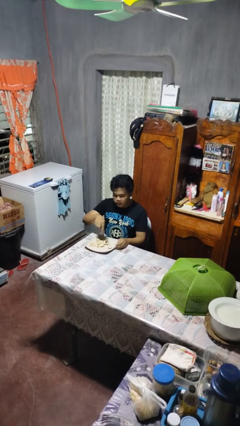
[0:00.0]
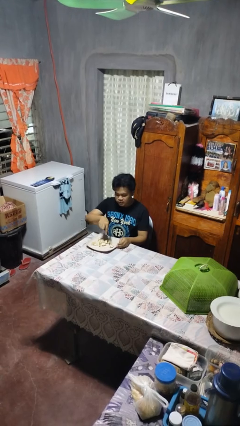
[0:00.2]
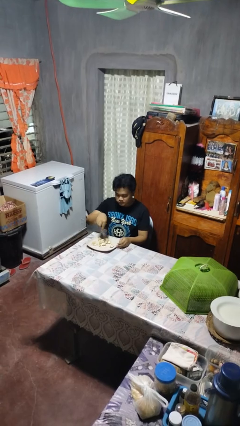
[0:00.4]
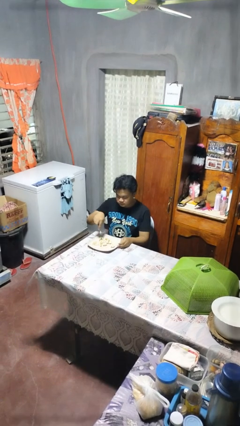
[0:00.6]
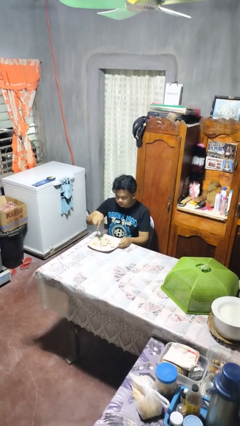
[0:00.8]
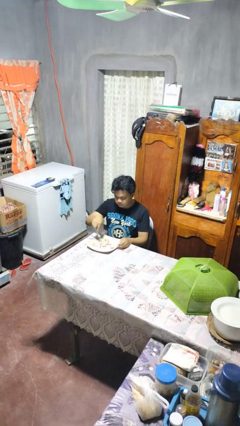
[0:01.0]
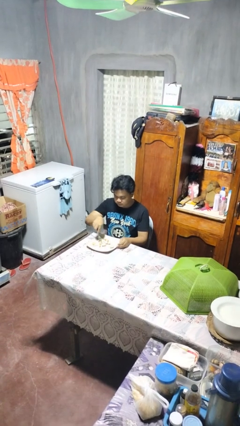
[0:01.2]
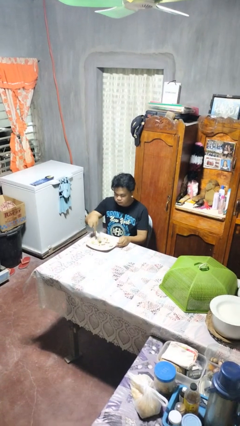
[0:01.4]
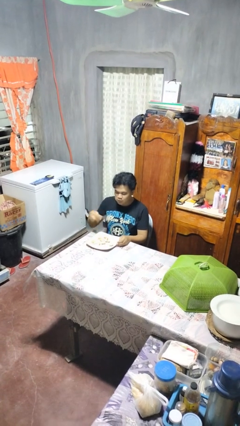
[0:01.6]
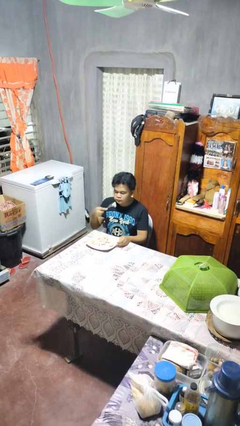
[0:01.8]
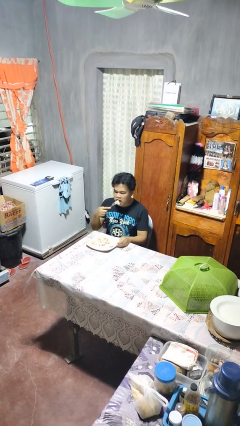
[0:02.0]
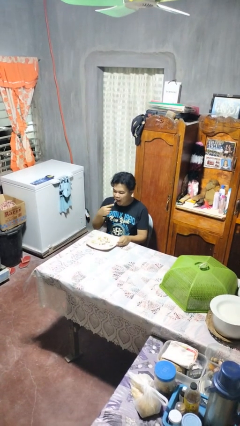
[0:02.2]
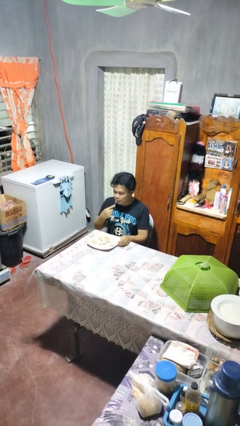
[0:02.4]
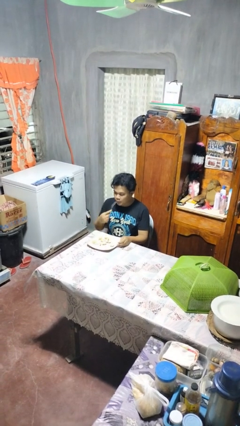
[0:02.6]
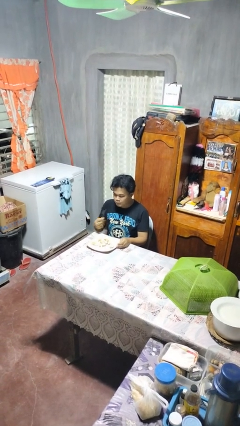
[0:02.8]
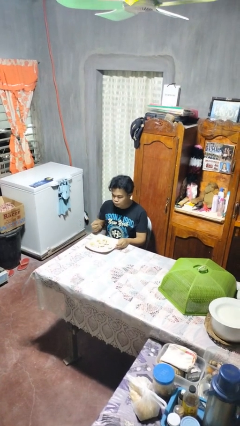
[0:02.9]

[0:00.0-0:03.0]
person eats with utensil

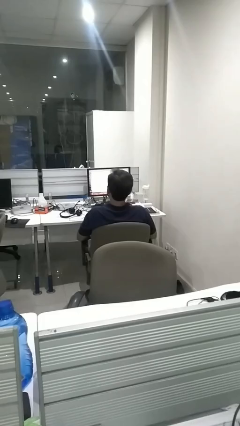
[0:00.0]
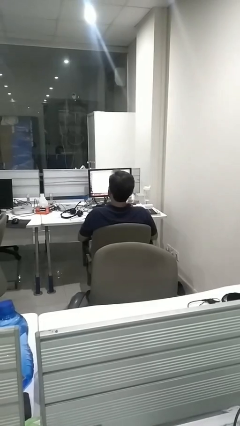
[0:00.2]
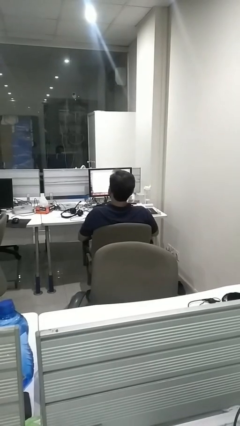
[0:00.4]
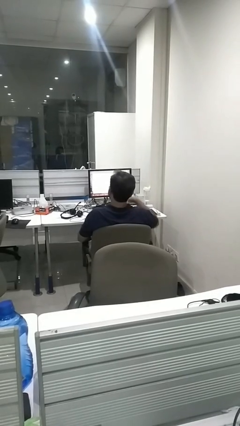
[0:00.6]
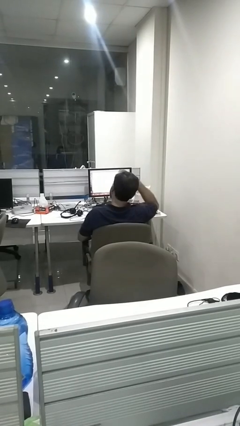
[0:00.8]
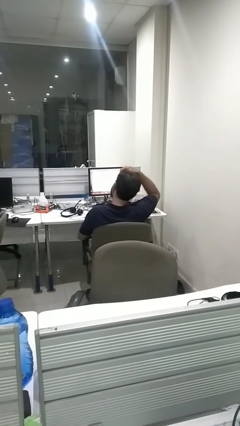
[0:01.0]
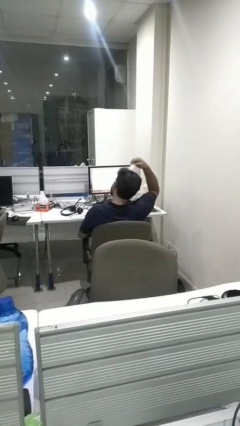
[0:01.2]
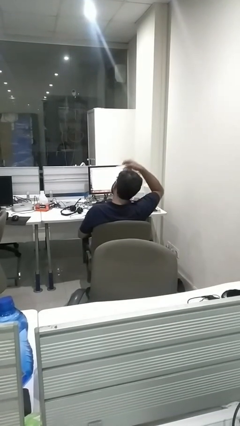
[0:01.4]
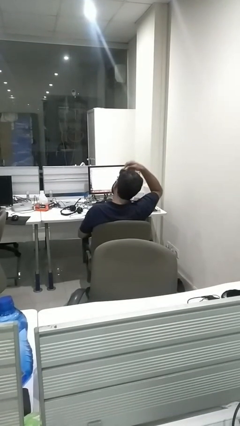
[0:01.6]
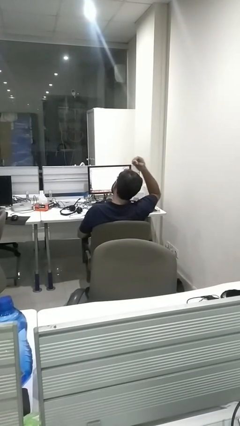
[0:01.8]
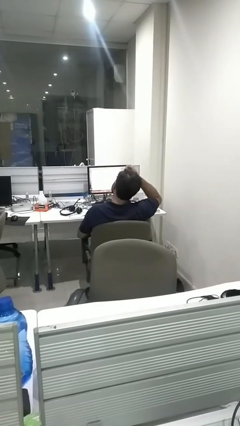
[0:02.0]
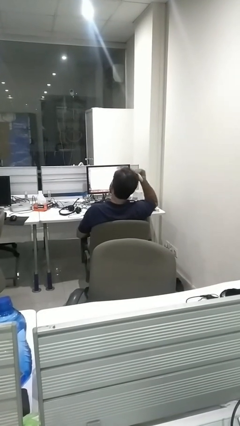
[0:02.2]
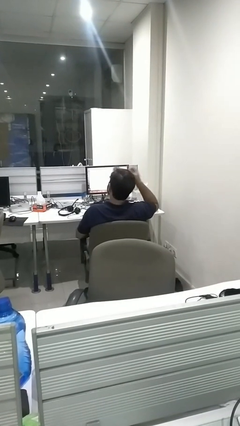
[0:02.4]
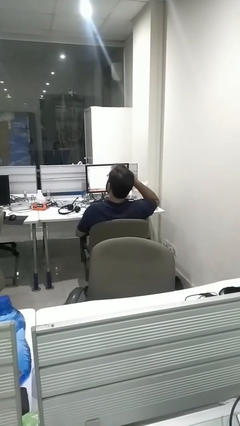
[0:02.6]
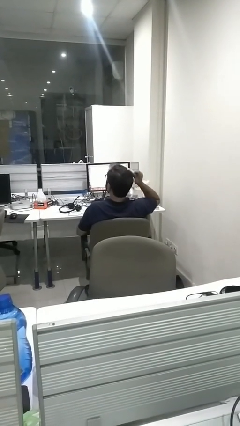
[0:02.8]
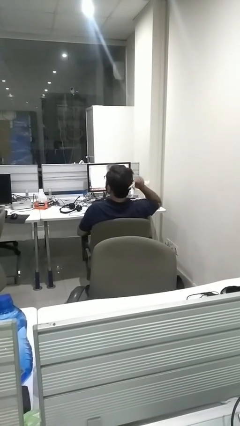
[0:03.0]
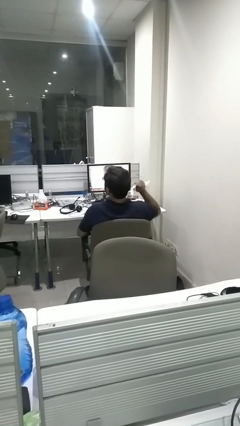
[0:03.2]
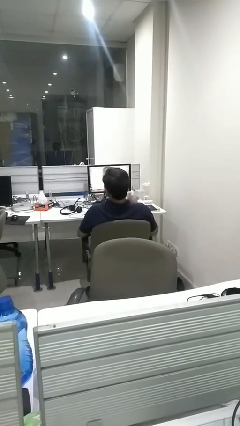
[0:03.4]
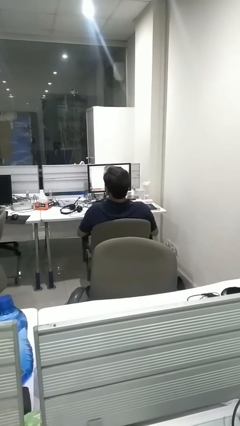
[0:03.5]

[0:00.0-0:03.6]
person brushes hair

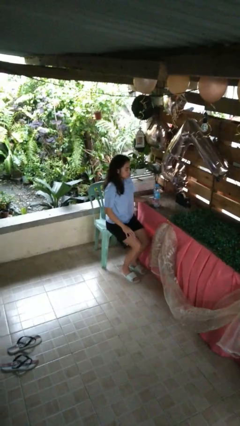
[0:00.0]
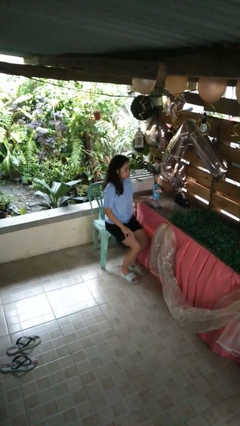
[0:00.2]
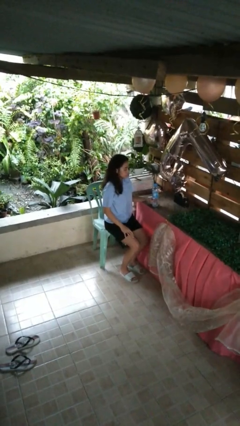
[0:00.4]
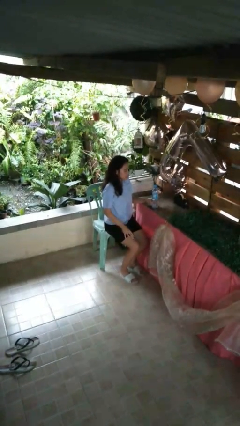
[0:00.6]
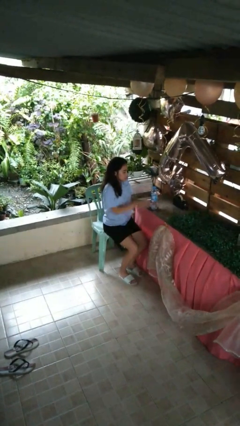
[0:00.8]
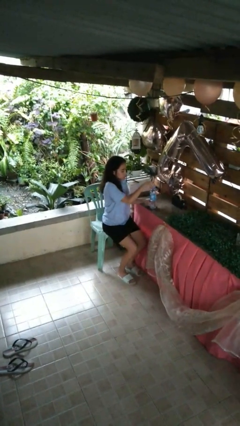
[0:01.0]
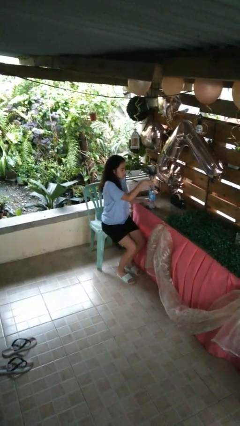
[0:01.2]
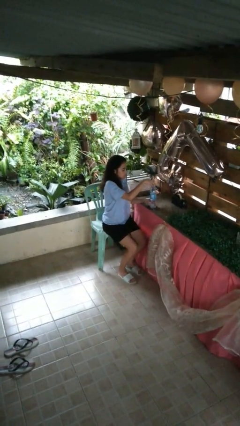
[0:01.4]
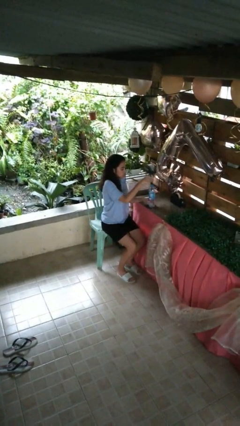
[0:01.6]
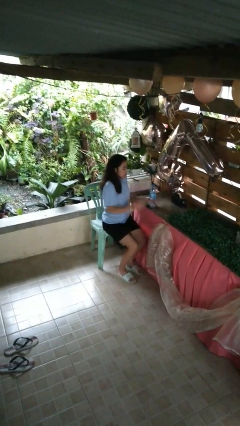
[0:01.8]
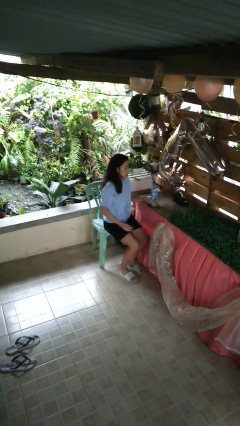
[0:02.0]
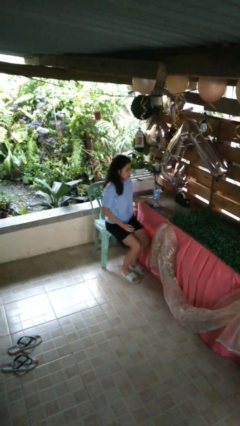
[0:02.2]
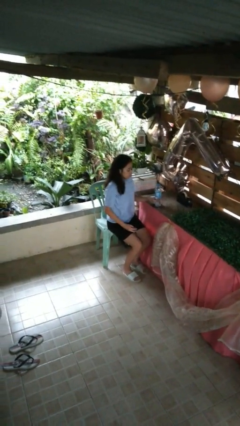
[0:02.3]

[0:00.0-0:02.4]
person unscrews lid from bottle

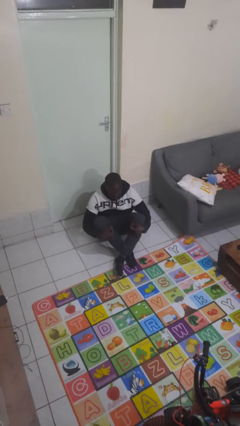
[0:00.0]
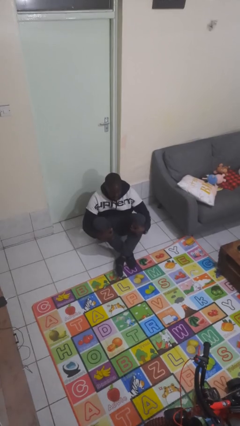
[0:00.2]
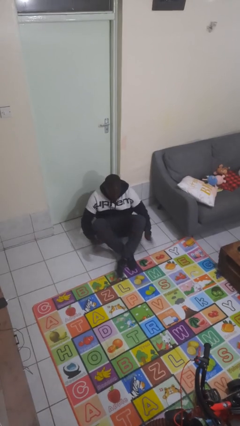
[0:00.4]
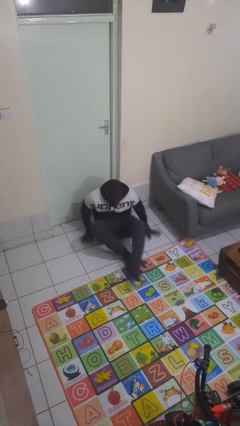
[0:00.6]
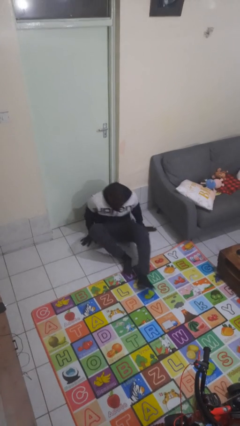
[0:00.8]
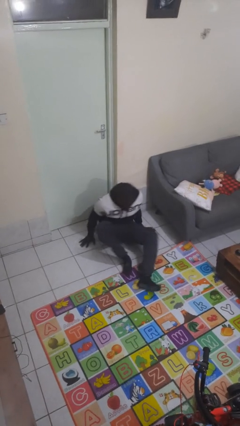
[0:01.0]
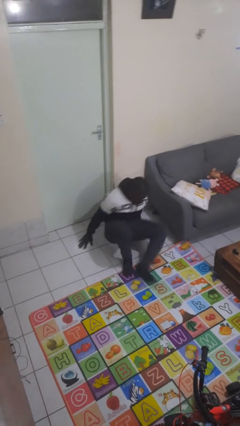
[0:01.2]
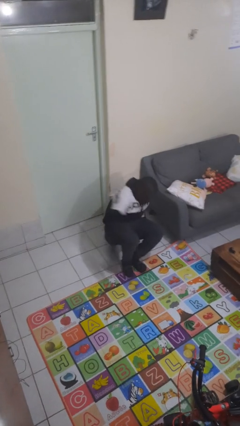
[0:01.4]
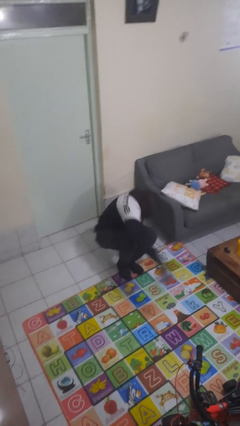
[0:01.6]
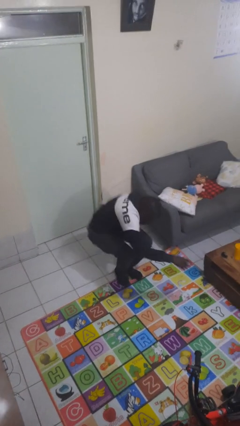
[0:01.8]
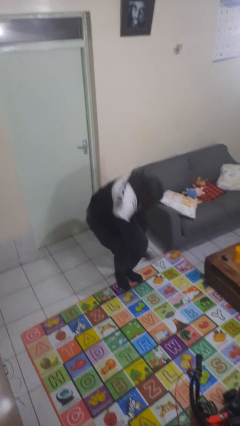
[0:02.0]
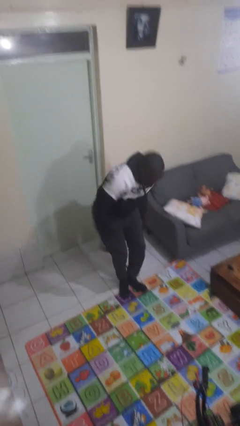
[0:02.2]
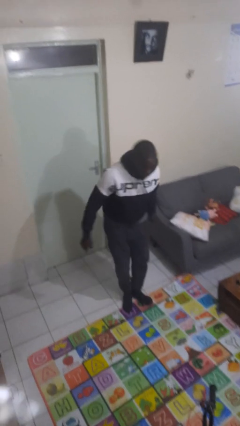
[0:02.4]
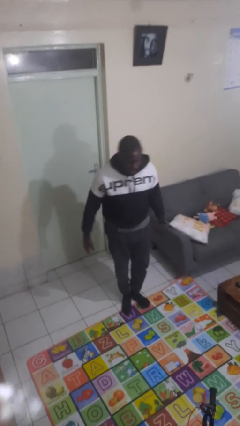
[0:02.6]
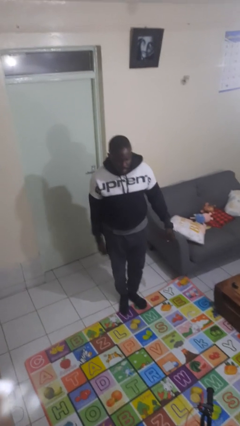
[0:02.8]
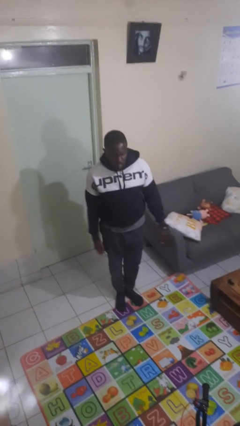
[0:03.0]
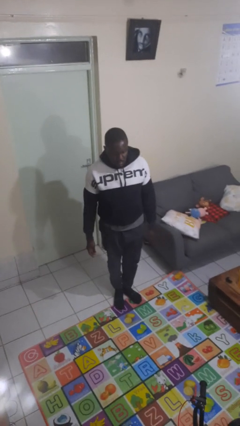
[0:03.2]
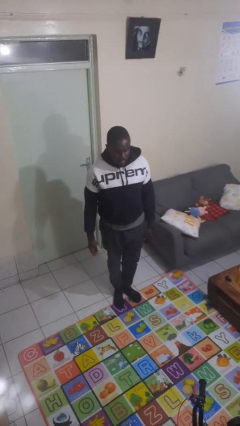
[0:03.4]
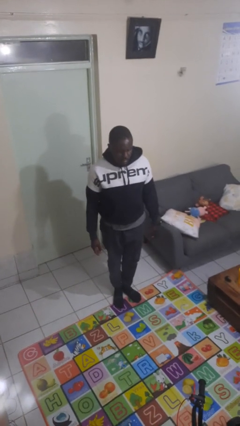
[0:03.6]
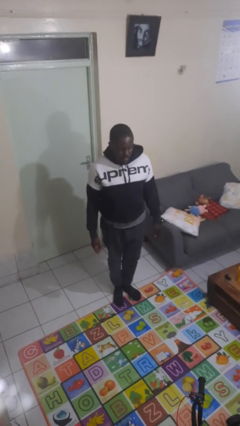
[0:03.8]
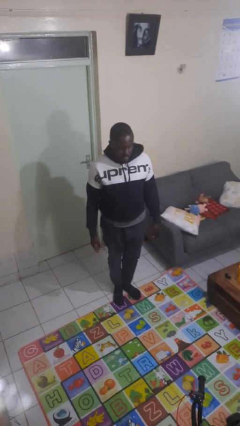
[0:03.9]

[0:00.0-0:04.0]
person stands up from floor

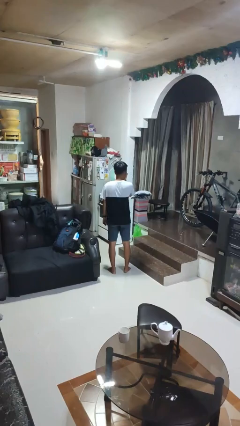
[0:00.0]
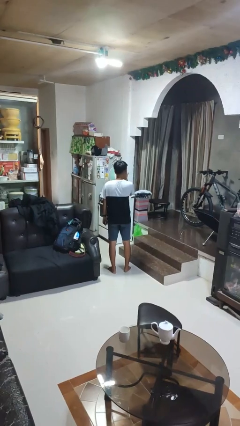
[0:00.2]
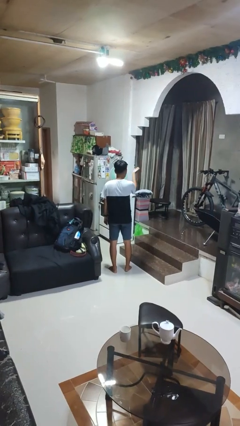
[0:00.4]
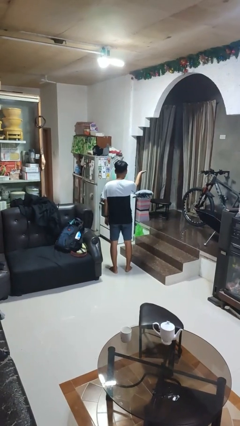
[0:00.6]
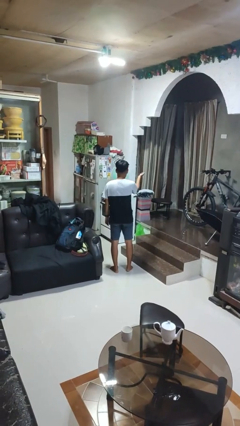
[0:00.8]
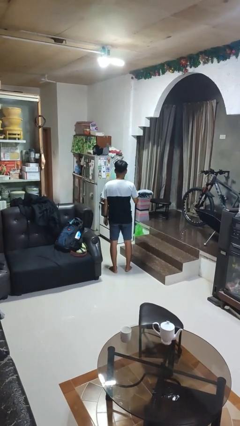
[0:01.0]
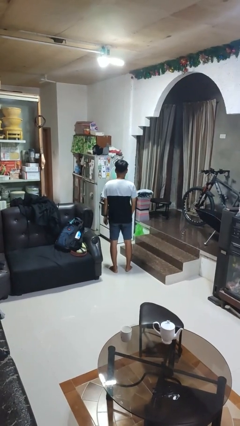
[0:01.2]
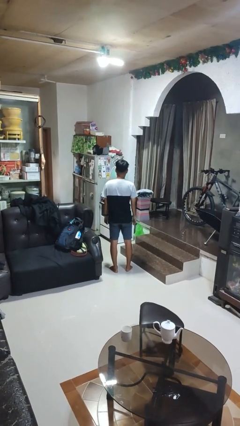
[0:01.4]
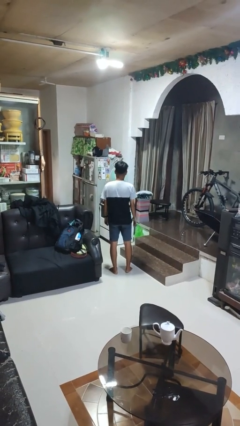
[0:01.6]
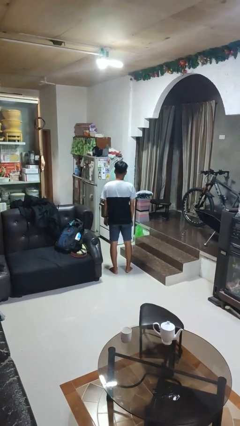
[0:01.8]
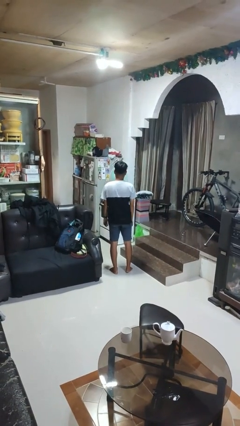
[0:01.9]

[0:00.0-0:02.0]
person gestures blow kiss

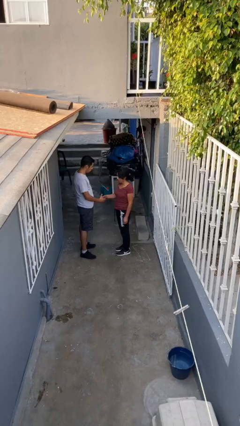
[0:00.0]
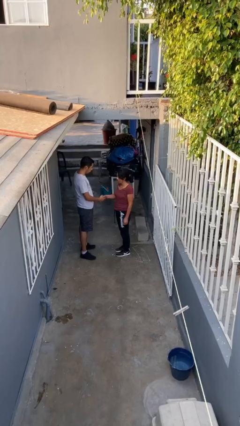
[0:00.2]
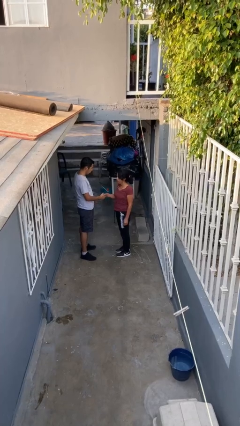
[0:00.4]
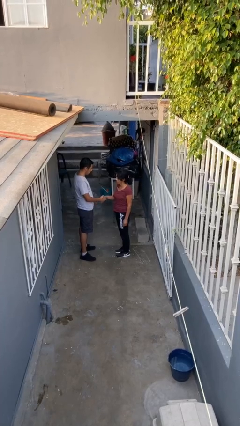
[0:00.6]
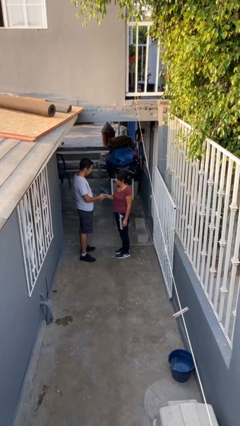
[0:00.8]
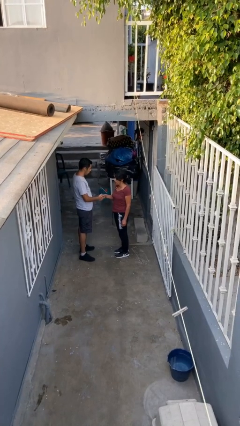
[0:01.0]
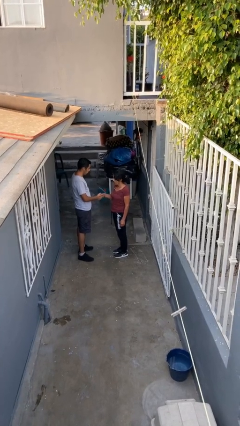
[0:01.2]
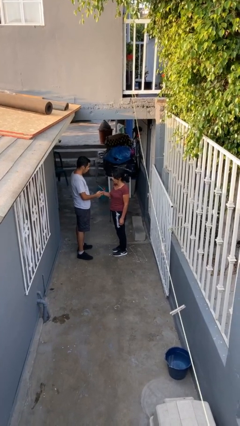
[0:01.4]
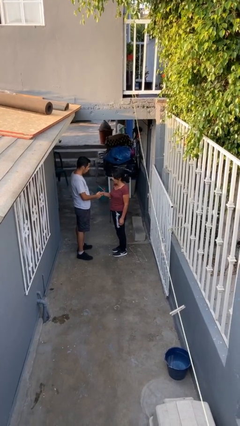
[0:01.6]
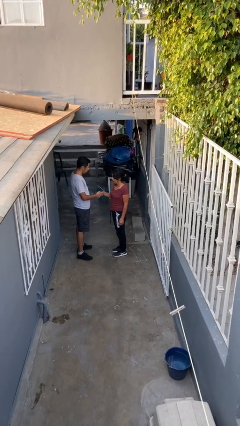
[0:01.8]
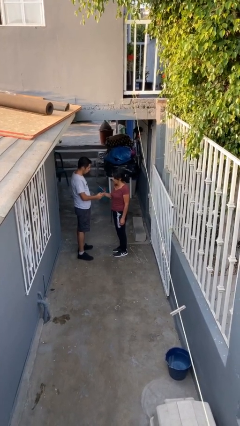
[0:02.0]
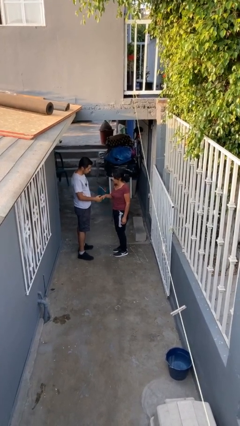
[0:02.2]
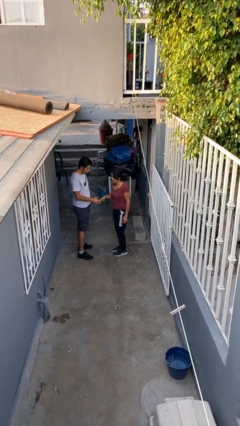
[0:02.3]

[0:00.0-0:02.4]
person shakes hand

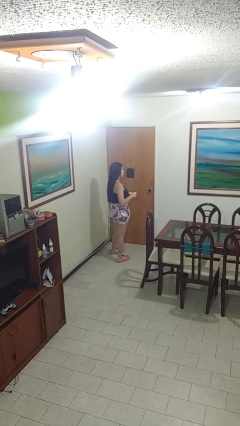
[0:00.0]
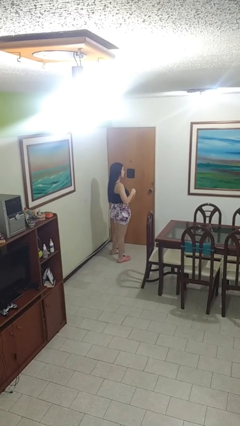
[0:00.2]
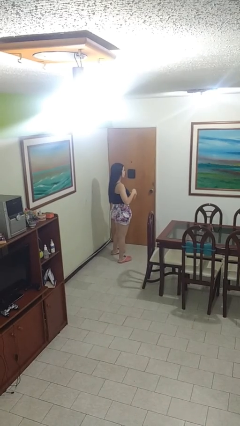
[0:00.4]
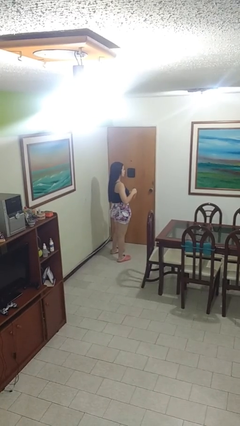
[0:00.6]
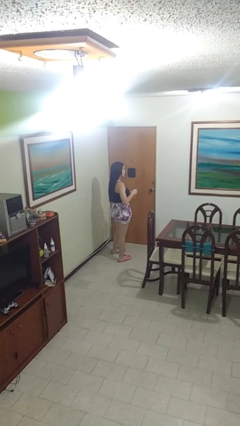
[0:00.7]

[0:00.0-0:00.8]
person stirs mug
